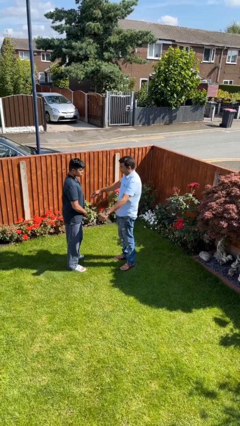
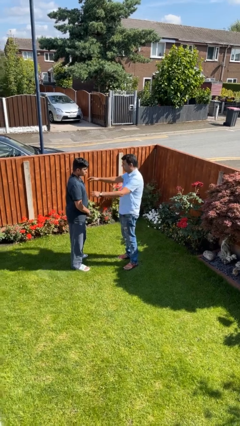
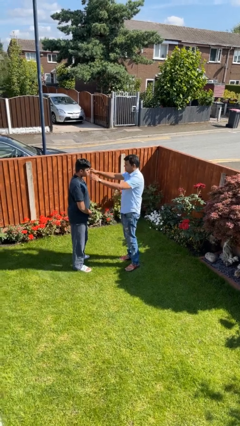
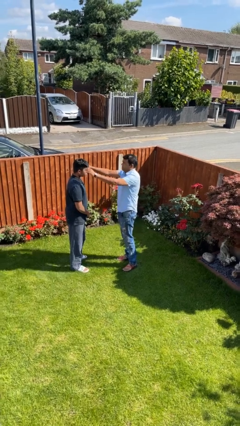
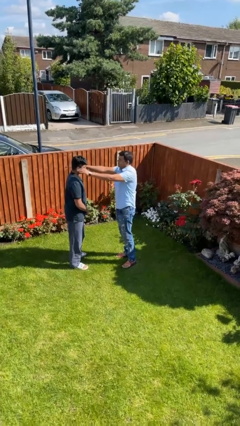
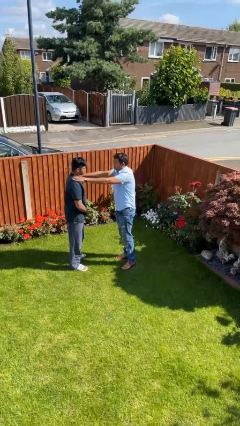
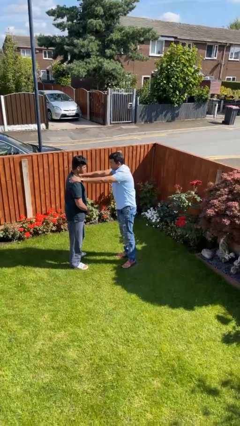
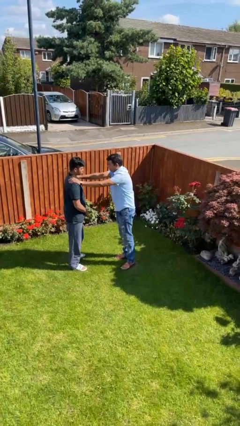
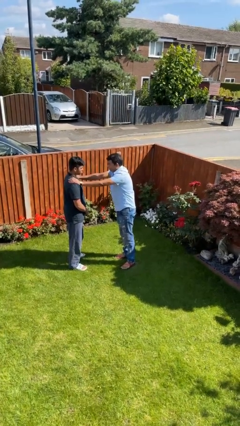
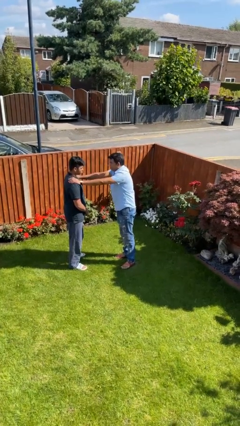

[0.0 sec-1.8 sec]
person pounds shoulders of person

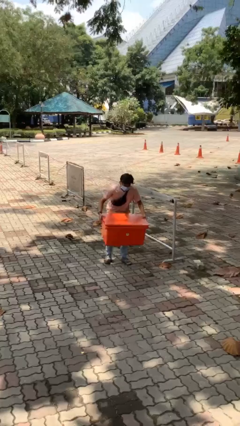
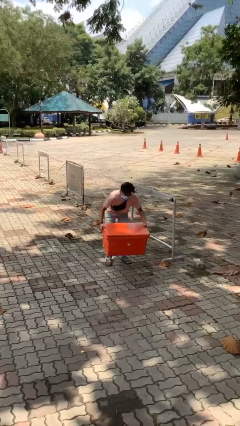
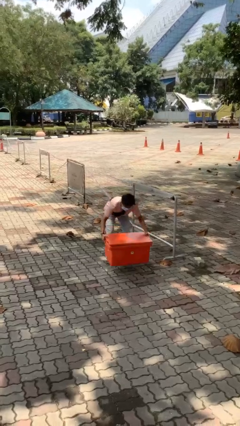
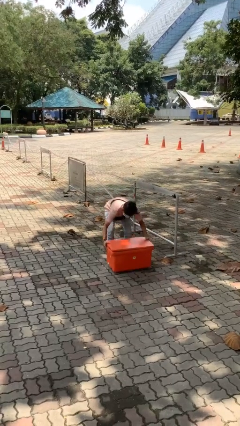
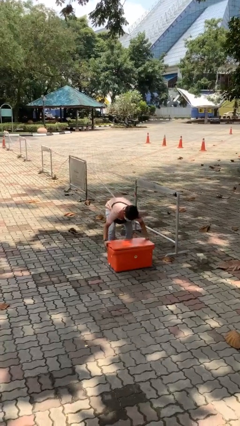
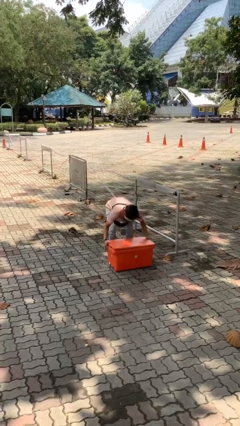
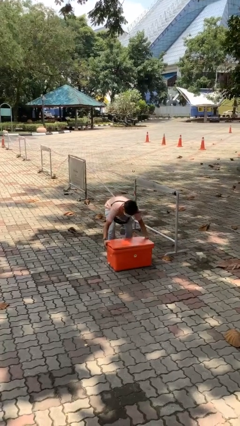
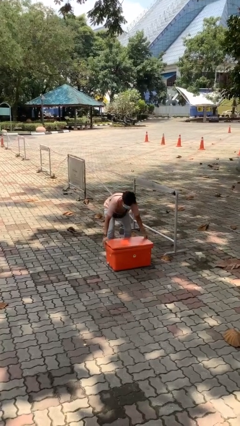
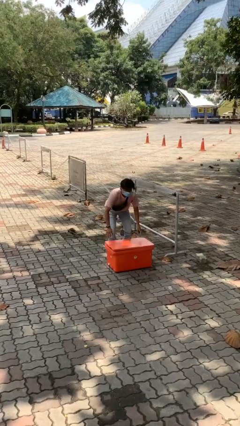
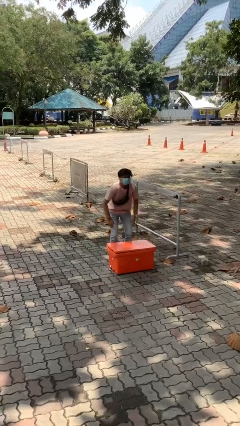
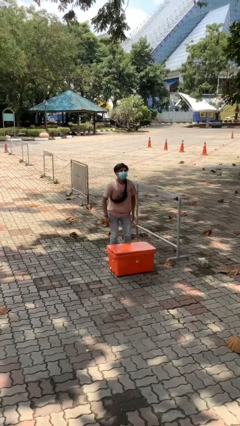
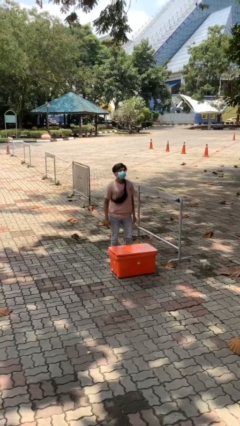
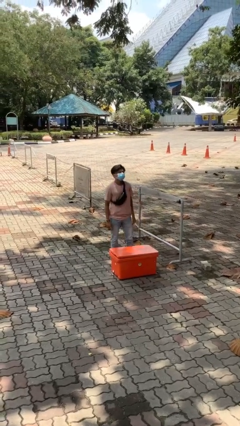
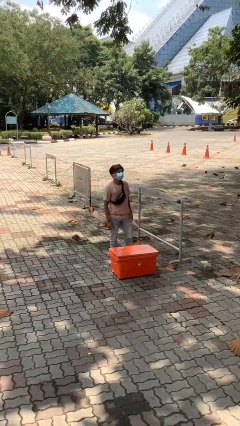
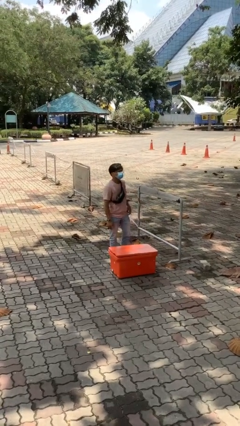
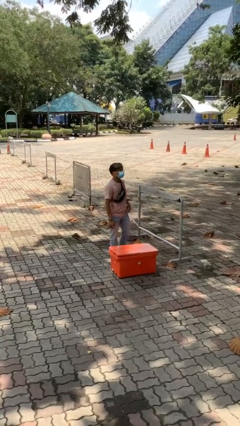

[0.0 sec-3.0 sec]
person puts down object on floor

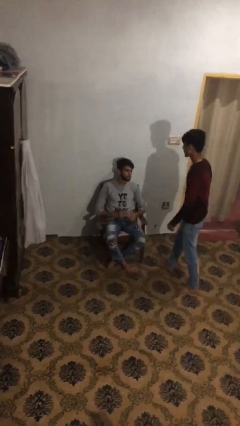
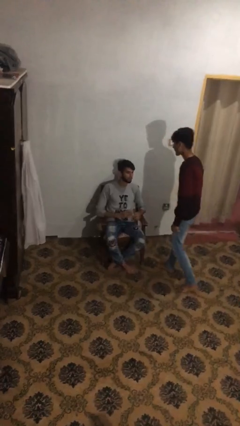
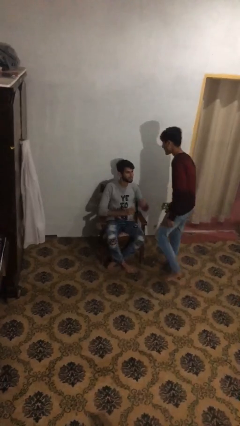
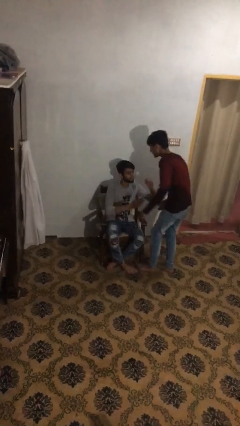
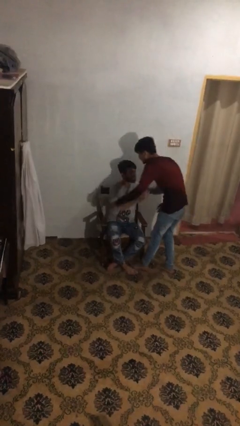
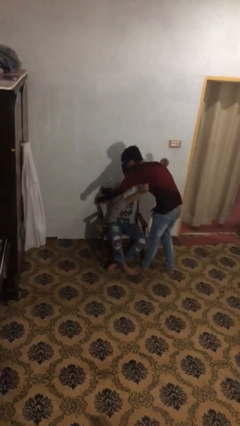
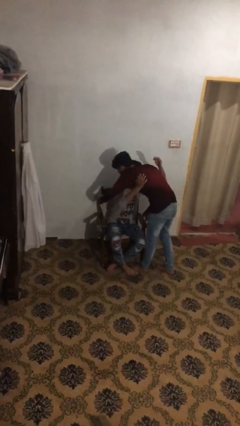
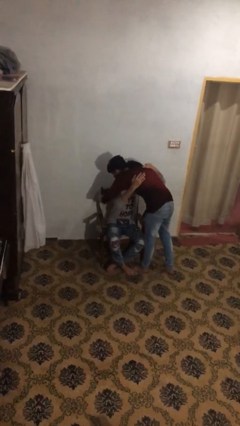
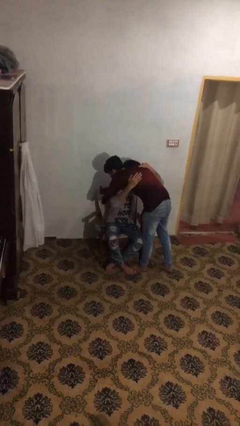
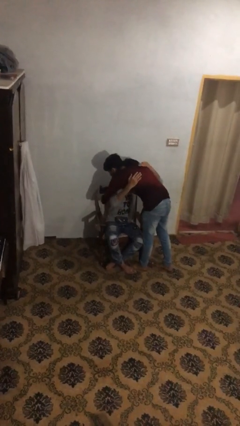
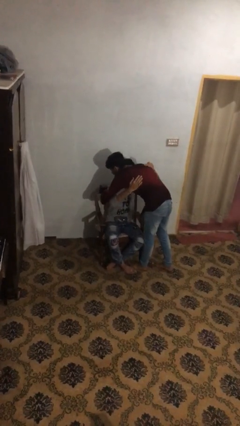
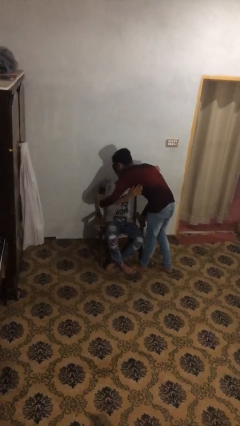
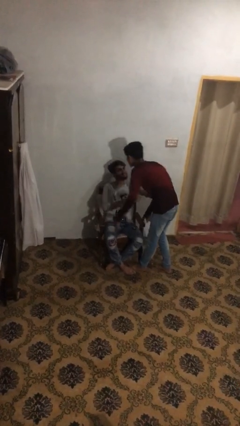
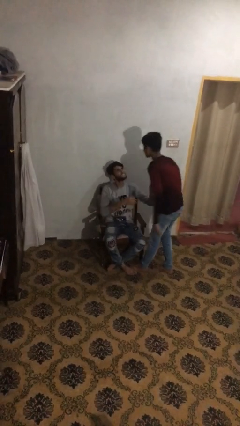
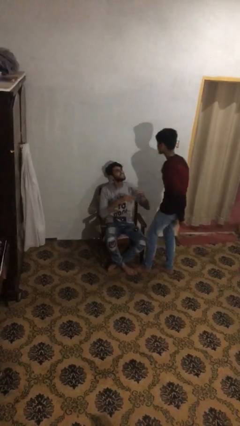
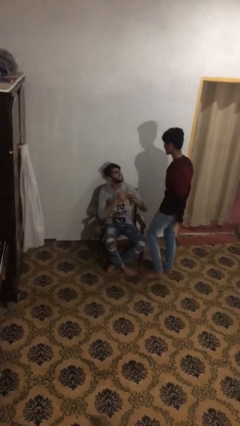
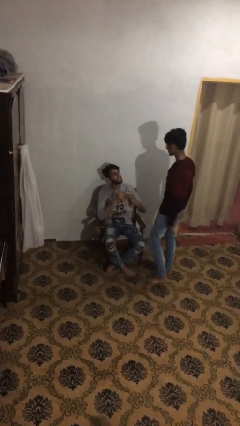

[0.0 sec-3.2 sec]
person embraces person

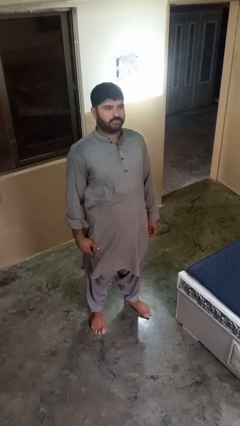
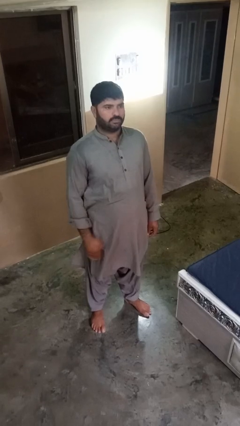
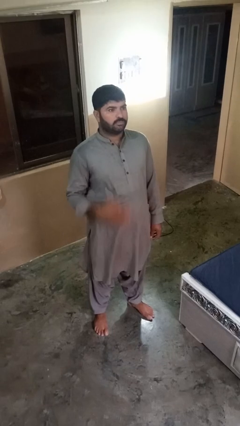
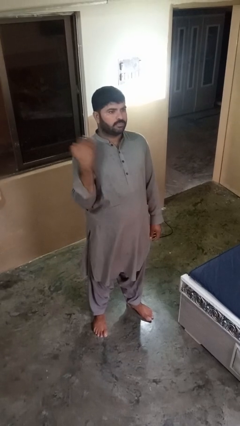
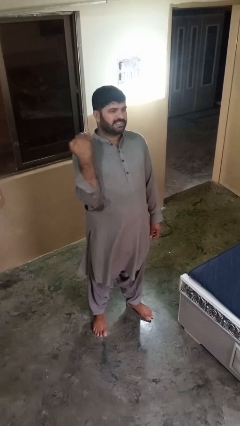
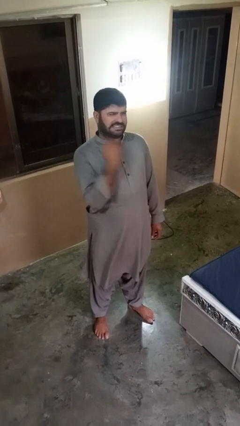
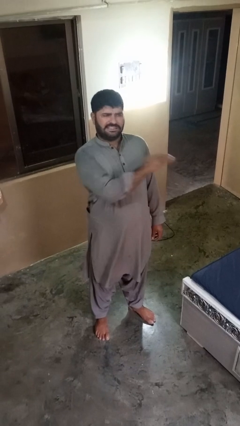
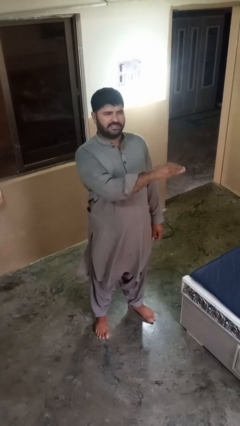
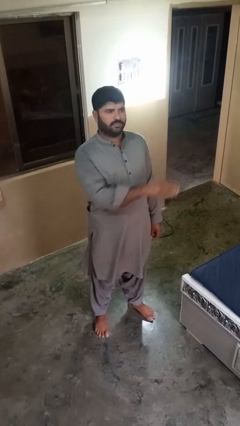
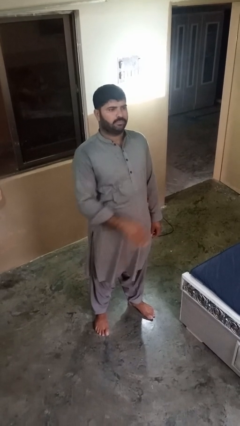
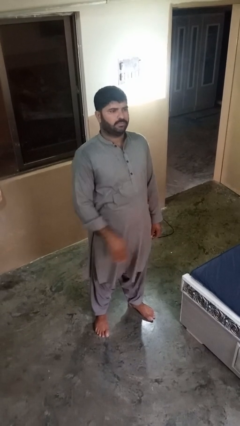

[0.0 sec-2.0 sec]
person gestures cut

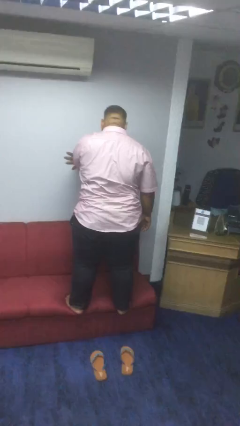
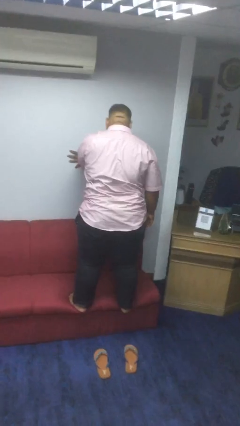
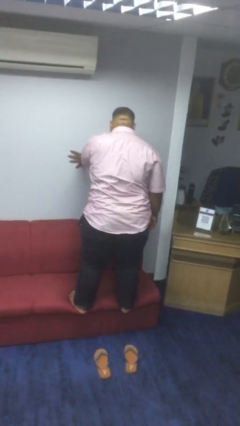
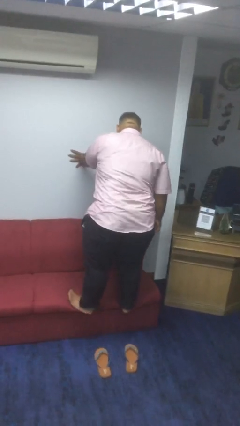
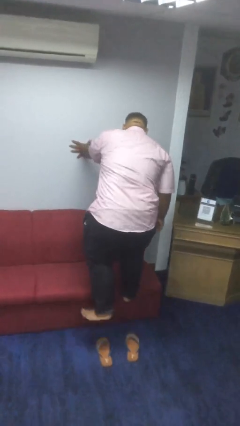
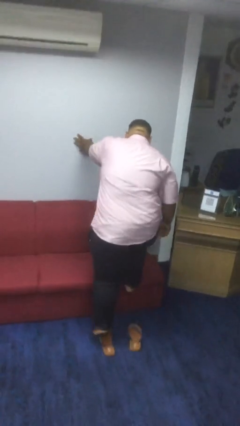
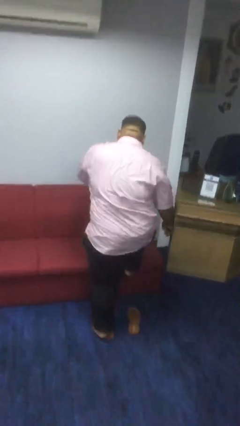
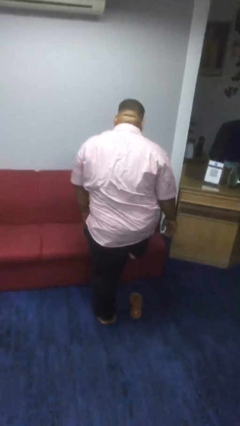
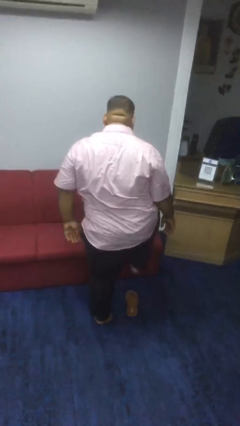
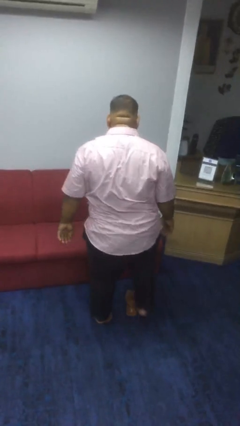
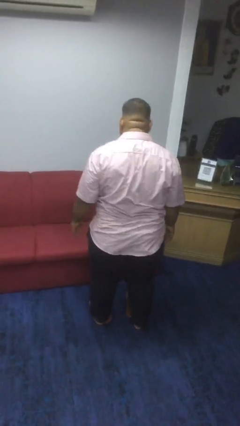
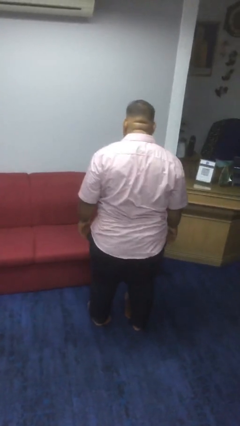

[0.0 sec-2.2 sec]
person climbs off couch

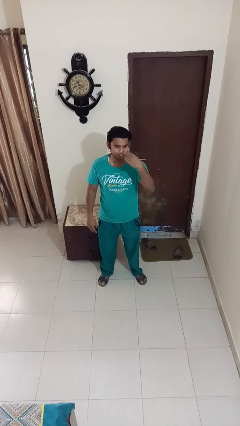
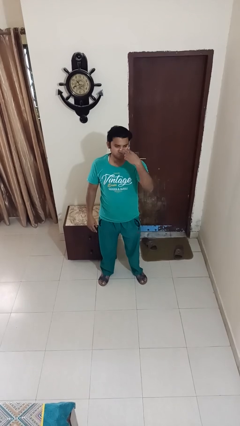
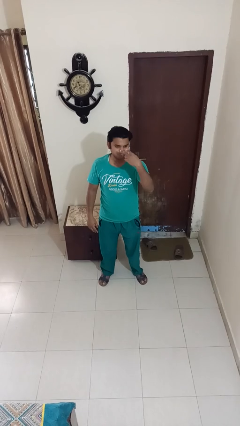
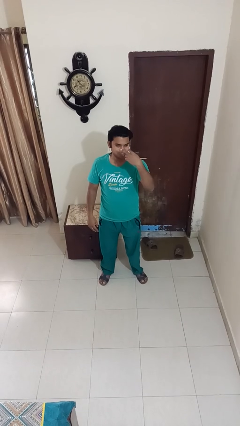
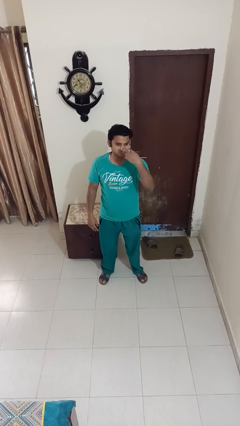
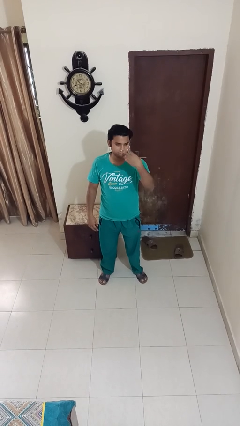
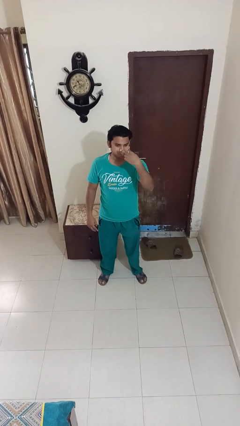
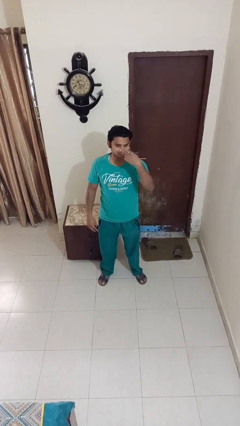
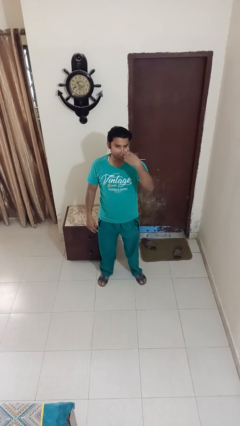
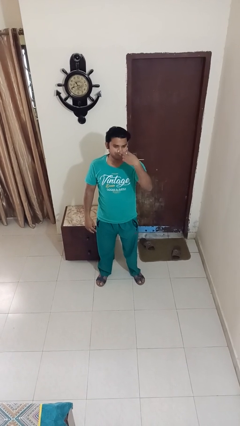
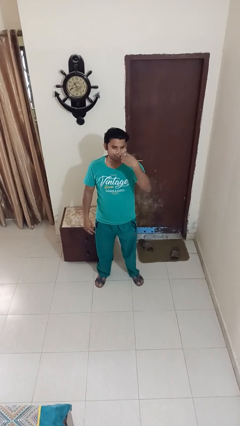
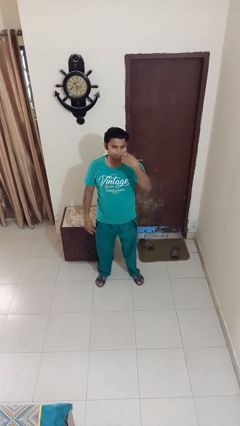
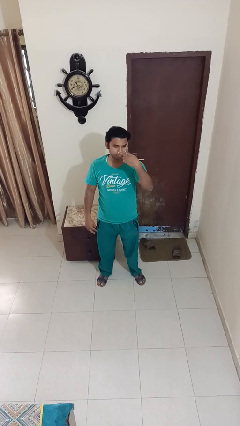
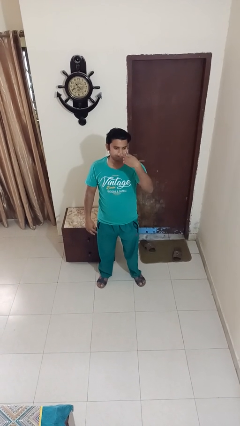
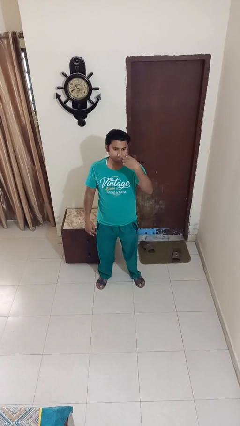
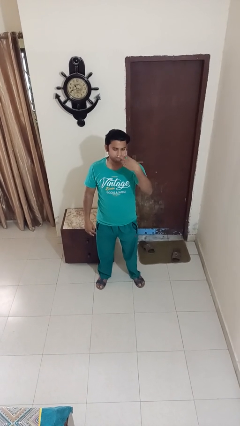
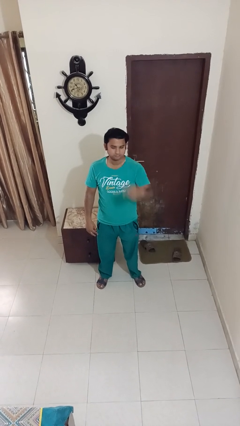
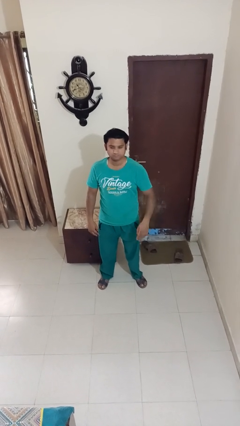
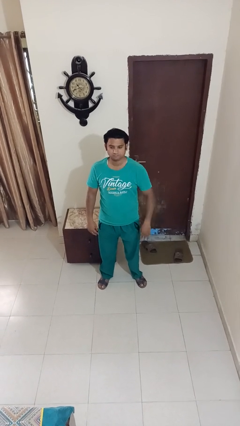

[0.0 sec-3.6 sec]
person gestures watch closely

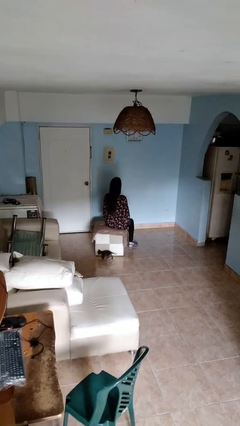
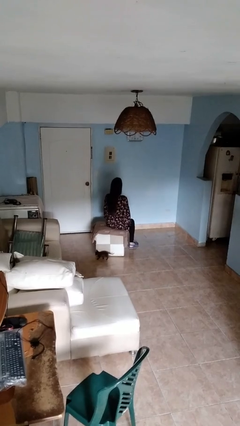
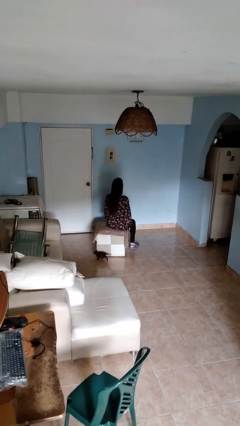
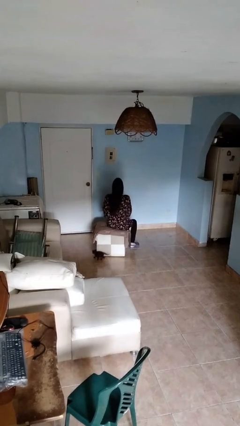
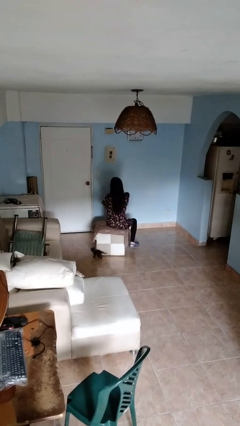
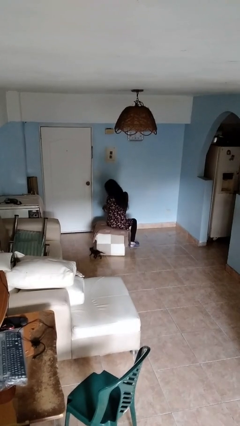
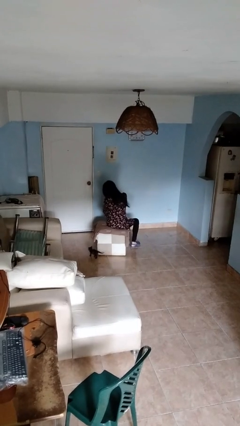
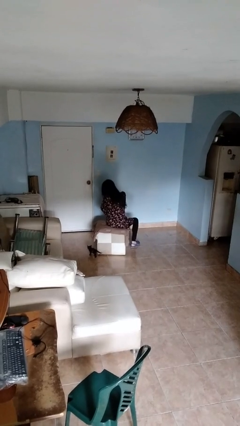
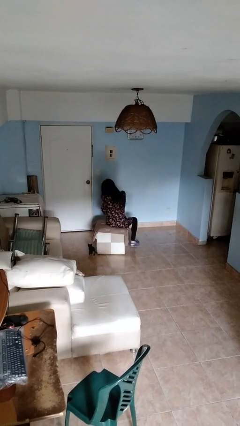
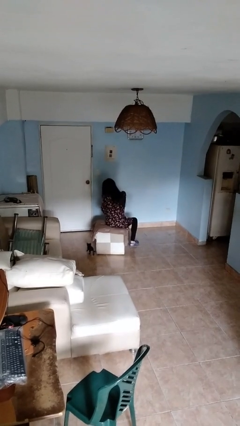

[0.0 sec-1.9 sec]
person sneezes into hand
